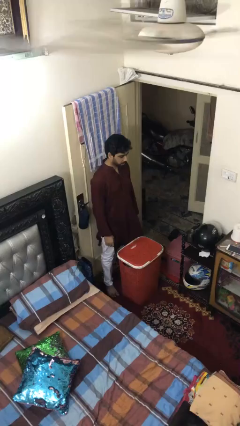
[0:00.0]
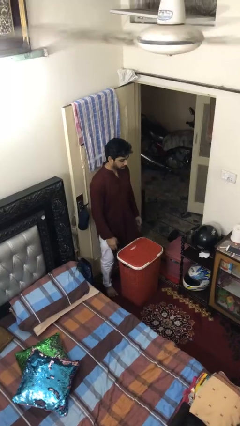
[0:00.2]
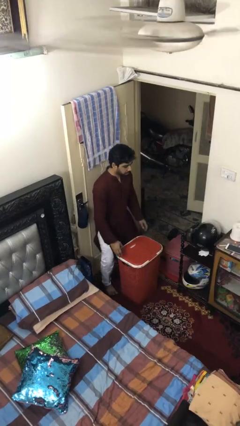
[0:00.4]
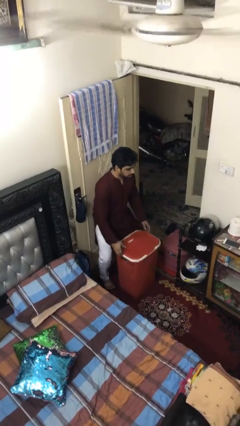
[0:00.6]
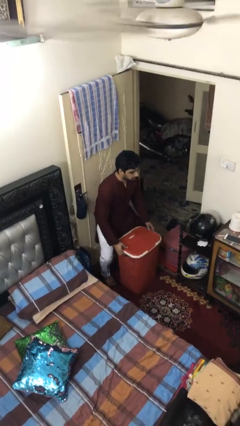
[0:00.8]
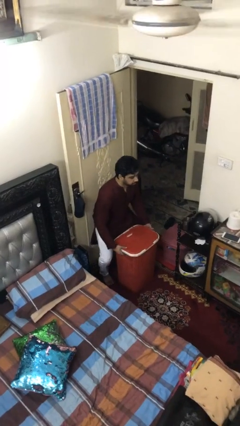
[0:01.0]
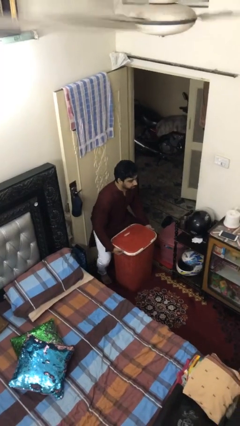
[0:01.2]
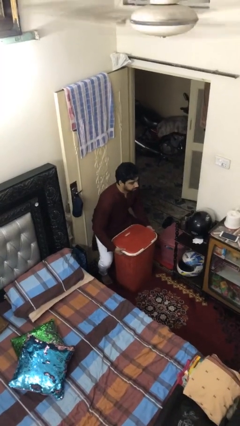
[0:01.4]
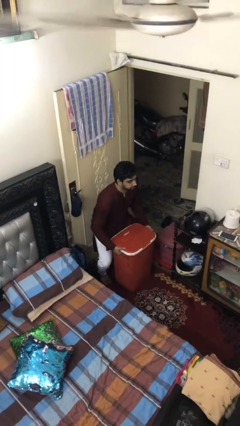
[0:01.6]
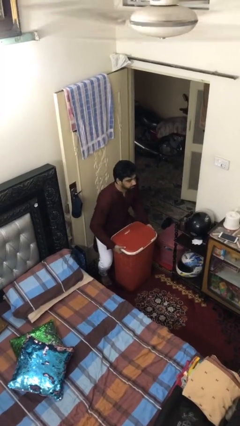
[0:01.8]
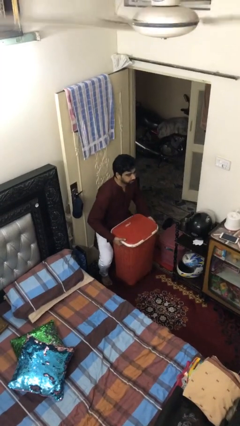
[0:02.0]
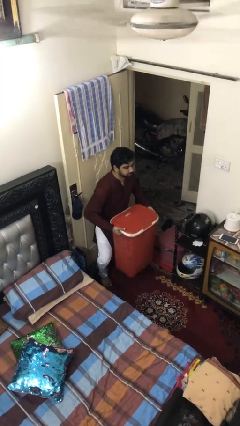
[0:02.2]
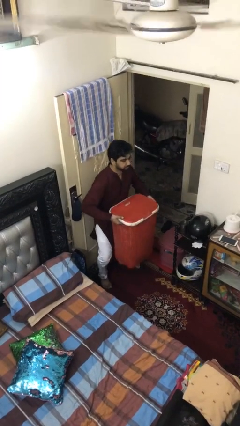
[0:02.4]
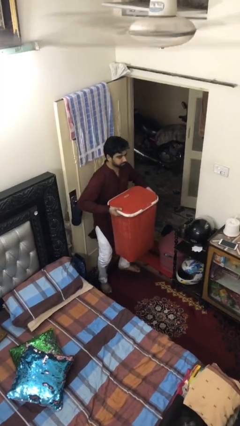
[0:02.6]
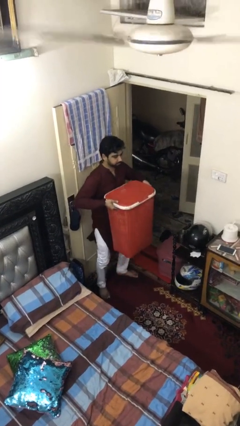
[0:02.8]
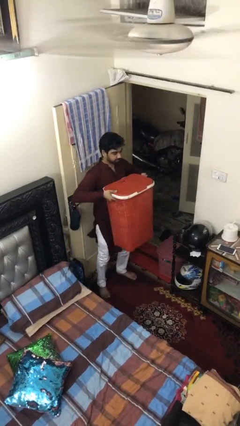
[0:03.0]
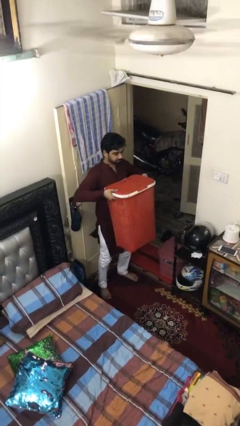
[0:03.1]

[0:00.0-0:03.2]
person picks up object from floor

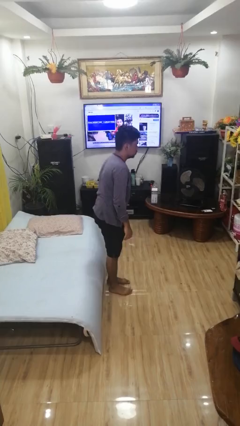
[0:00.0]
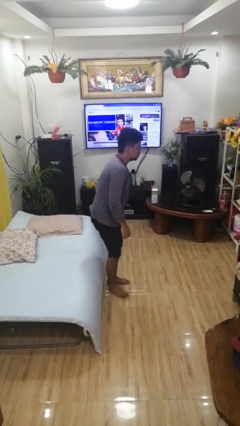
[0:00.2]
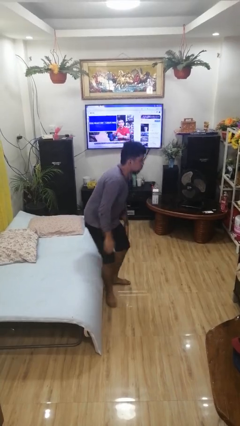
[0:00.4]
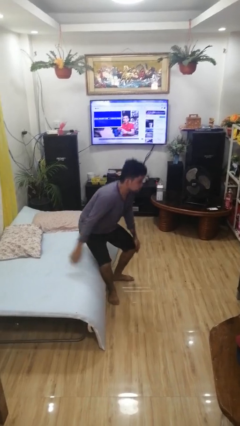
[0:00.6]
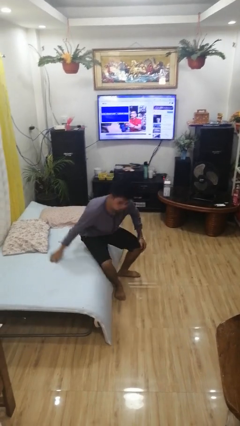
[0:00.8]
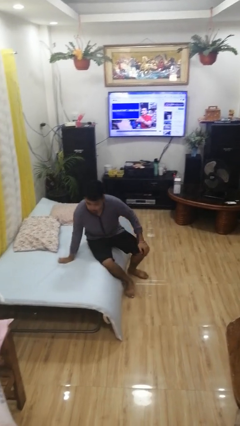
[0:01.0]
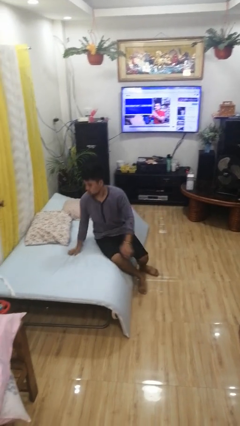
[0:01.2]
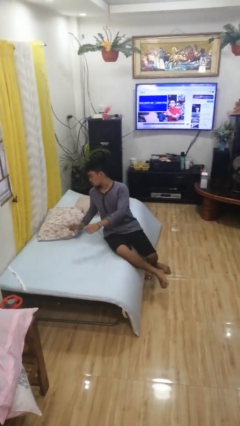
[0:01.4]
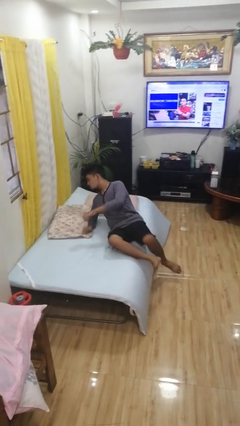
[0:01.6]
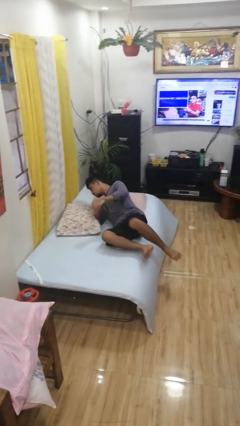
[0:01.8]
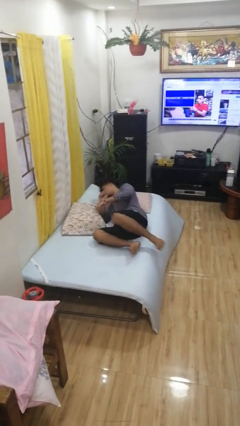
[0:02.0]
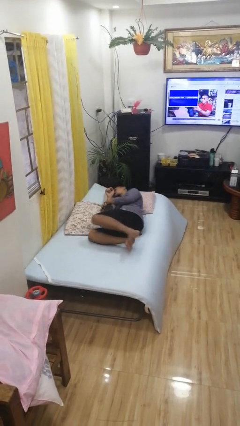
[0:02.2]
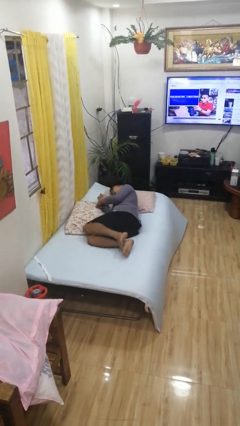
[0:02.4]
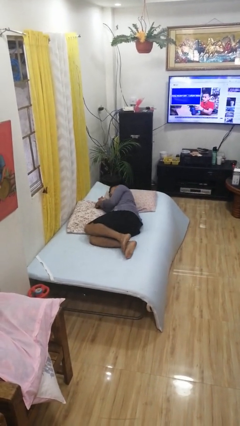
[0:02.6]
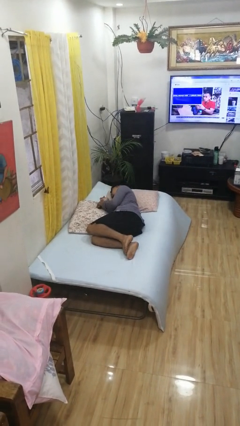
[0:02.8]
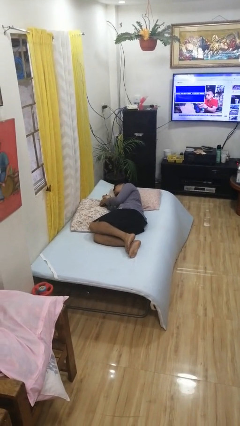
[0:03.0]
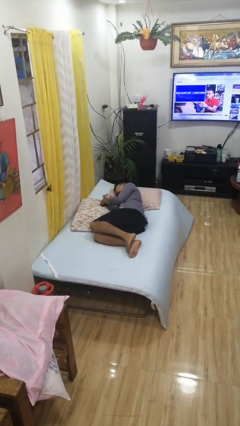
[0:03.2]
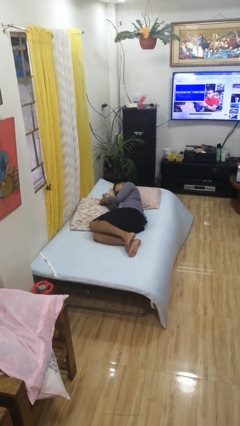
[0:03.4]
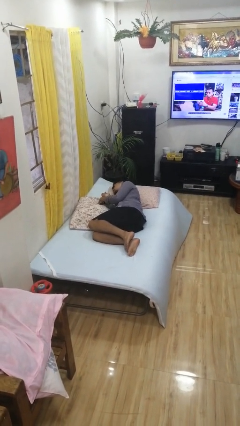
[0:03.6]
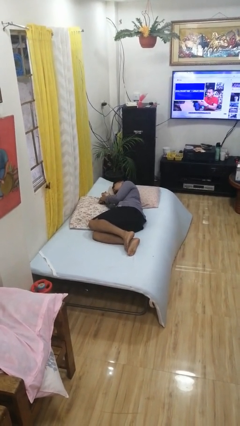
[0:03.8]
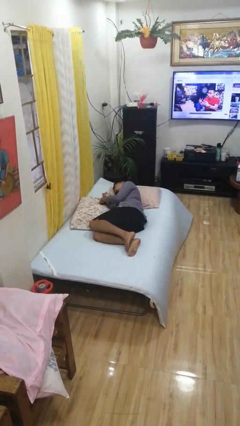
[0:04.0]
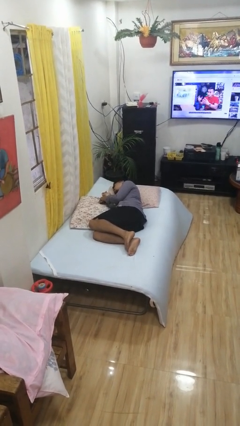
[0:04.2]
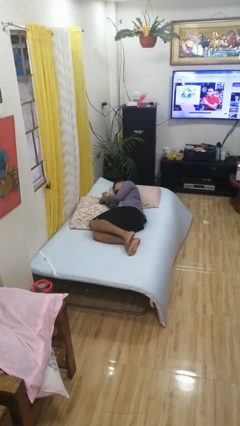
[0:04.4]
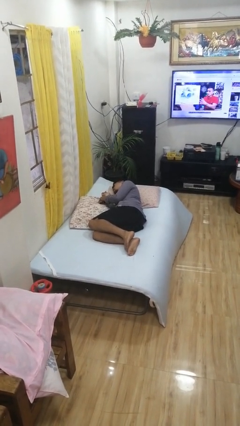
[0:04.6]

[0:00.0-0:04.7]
person lies down on bed

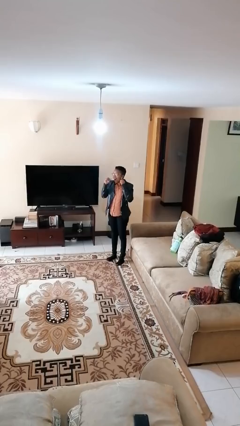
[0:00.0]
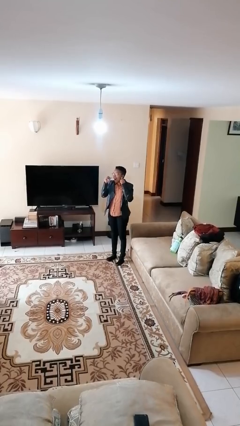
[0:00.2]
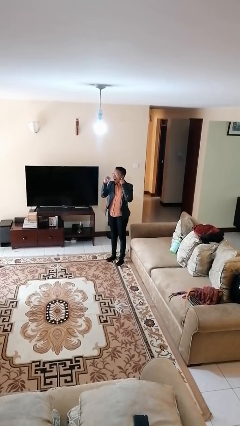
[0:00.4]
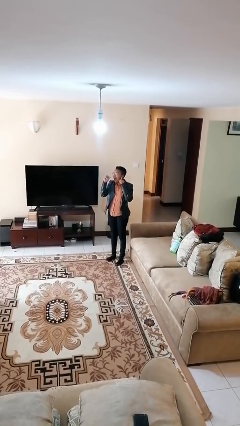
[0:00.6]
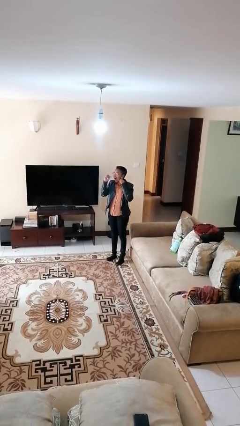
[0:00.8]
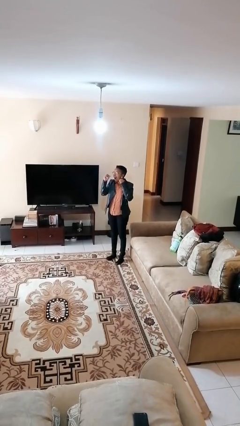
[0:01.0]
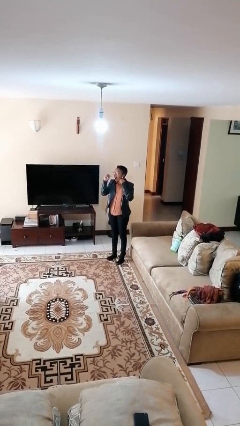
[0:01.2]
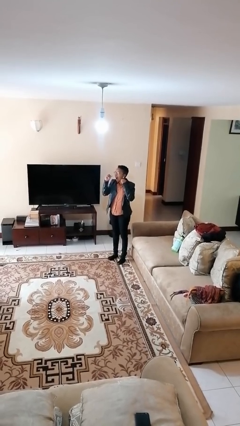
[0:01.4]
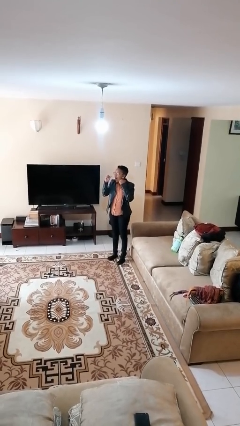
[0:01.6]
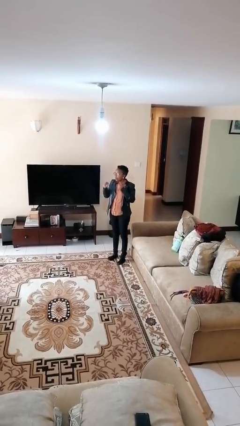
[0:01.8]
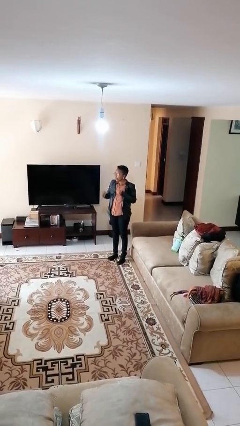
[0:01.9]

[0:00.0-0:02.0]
person flosses

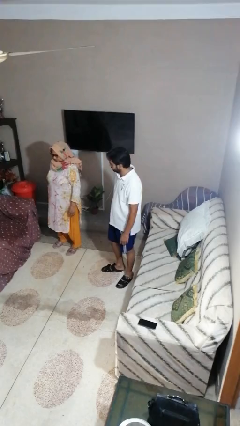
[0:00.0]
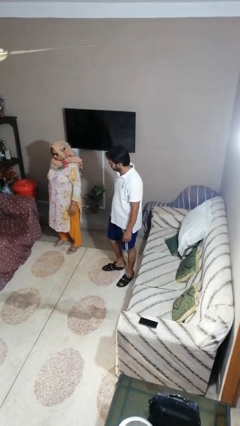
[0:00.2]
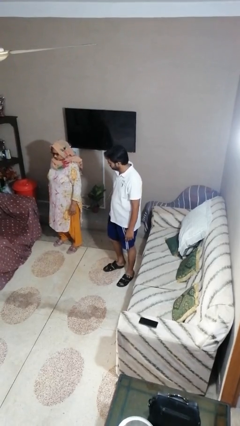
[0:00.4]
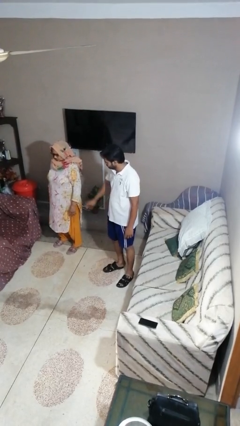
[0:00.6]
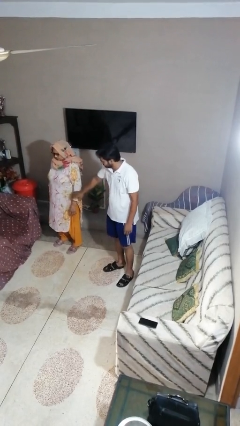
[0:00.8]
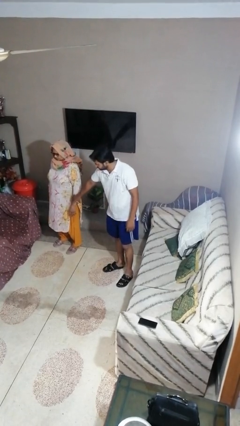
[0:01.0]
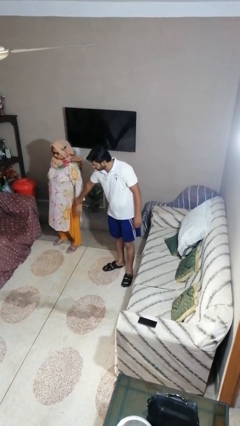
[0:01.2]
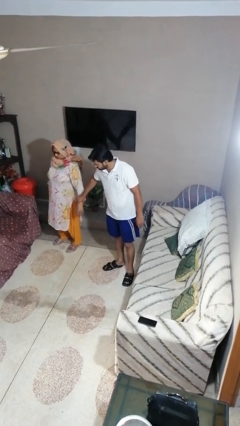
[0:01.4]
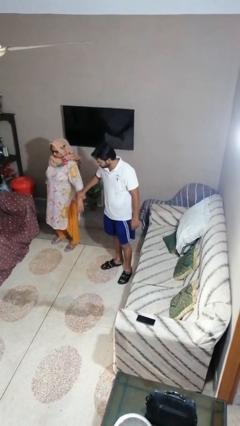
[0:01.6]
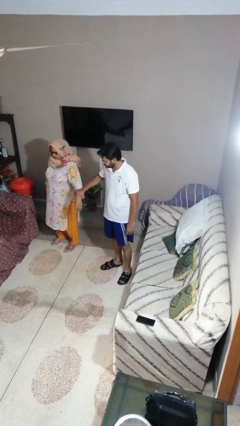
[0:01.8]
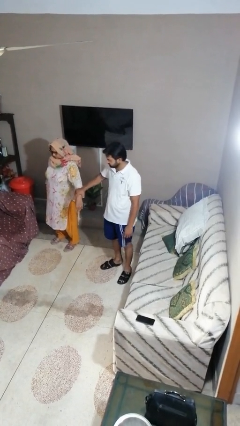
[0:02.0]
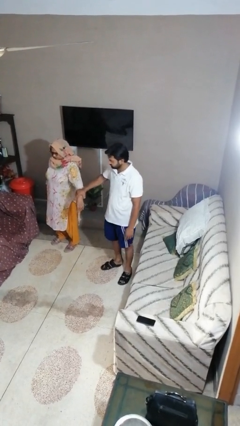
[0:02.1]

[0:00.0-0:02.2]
person grabs person by forearm

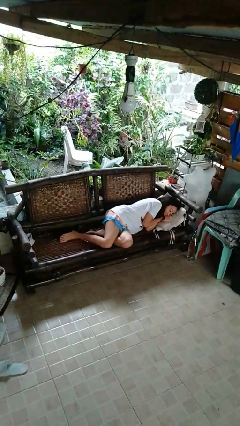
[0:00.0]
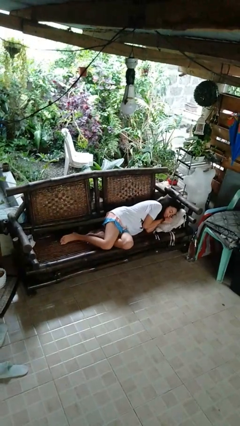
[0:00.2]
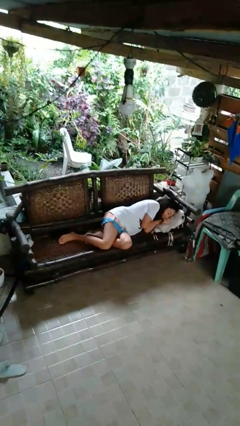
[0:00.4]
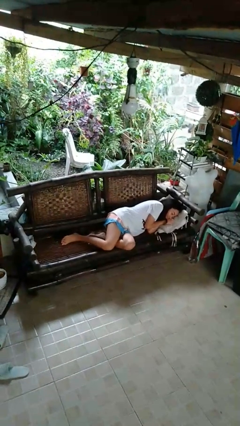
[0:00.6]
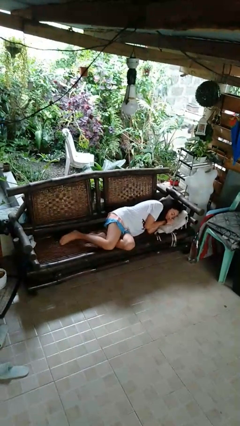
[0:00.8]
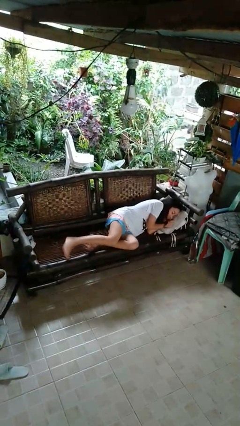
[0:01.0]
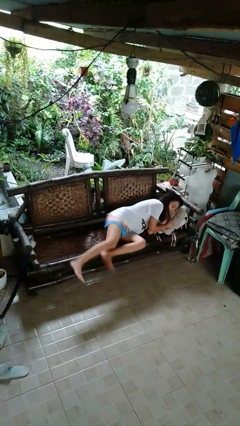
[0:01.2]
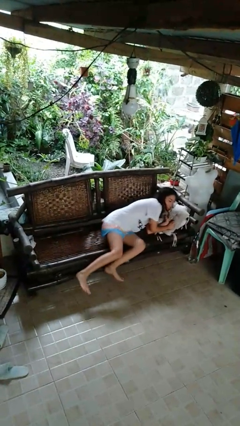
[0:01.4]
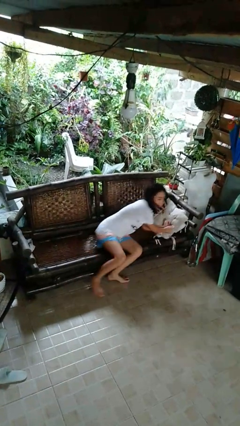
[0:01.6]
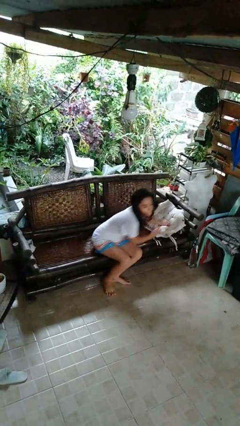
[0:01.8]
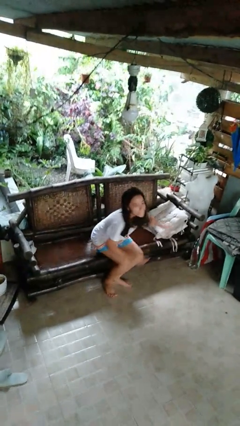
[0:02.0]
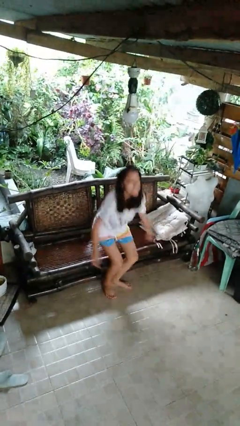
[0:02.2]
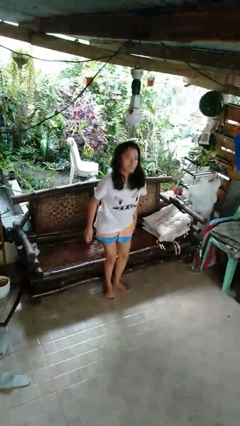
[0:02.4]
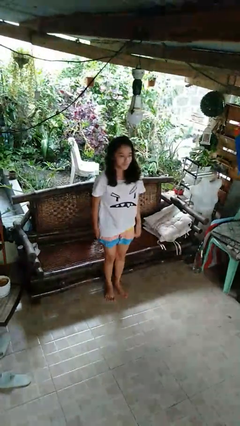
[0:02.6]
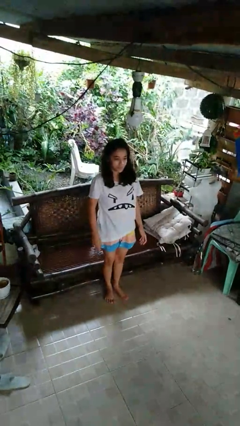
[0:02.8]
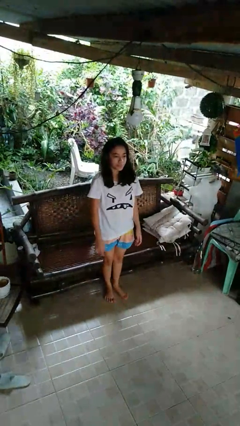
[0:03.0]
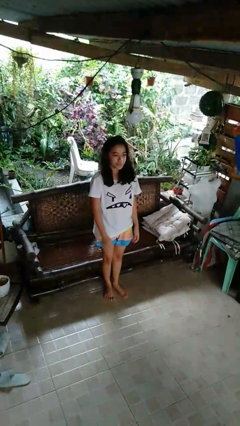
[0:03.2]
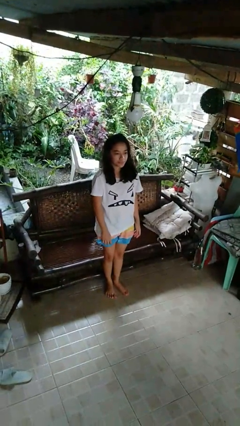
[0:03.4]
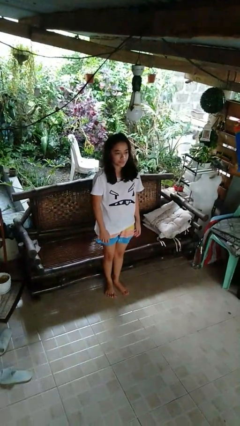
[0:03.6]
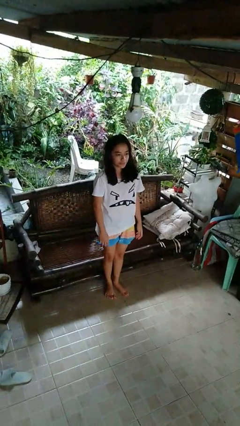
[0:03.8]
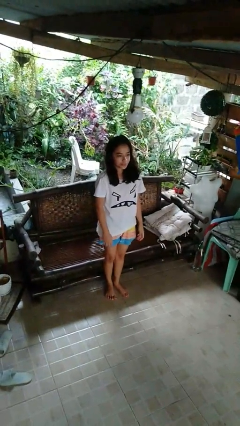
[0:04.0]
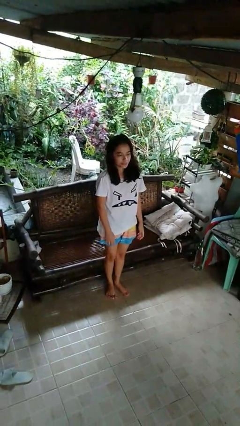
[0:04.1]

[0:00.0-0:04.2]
person stands up

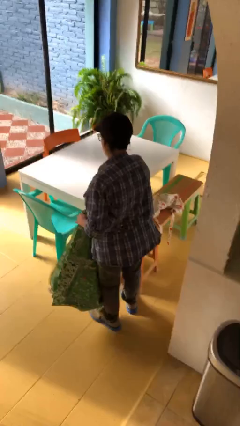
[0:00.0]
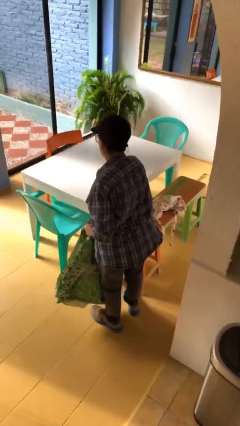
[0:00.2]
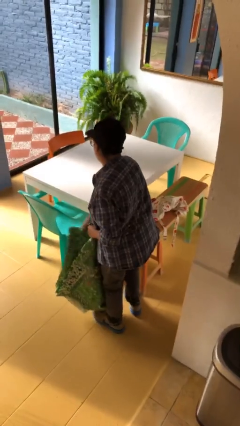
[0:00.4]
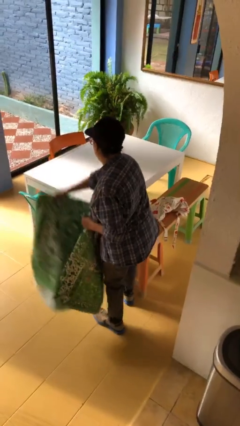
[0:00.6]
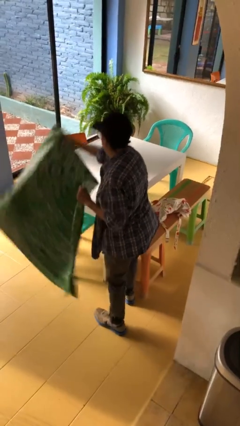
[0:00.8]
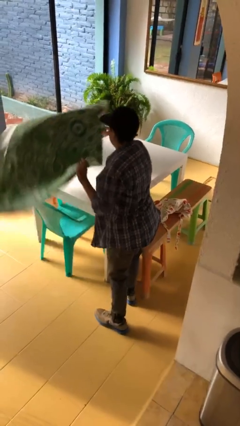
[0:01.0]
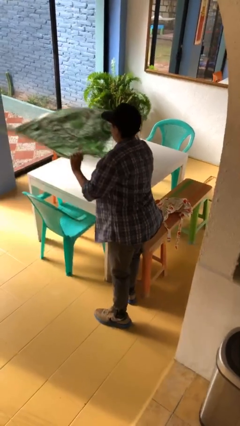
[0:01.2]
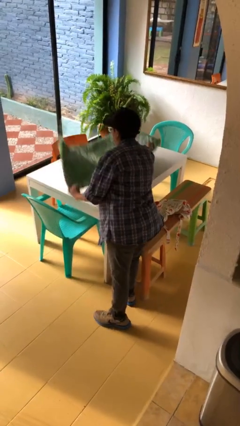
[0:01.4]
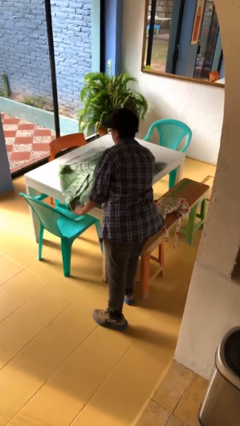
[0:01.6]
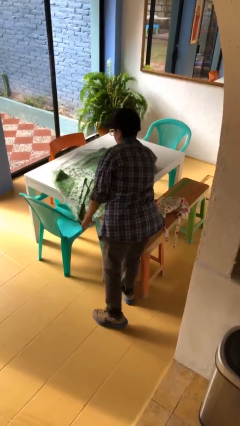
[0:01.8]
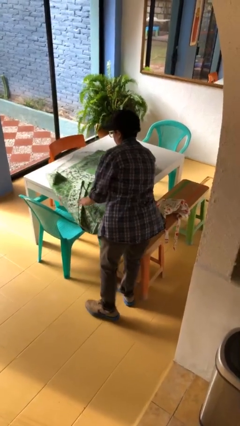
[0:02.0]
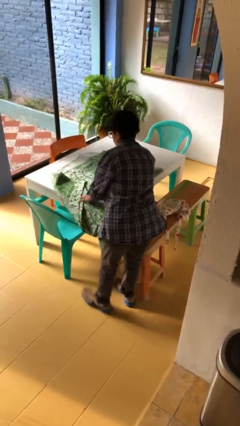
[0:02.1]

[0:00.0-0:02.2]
person spreads tablecloth
